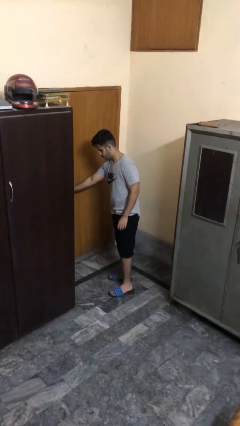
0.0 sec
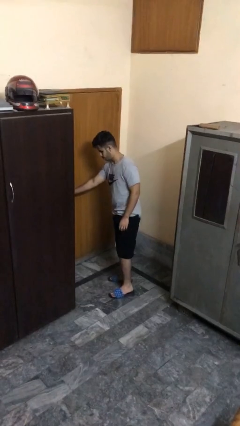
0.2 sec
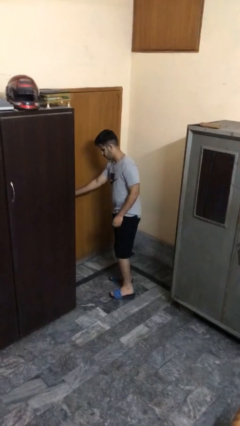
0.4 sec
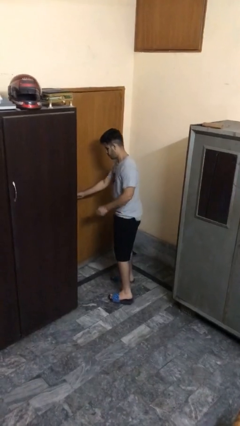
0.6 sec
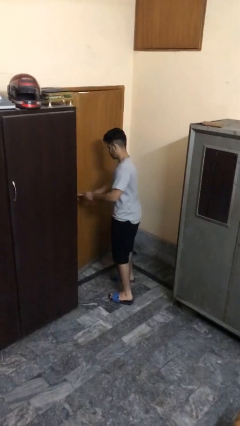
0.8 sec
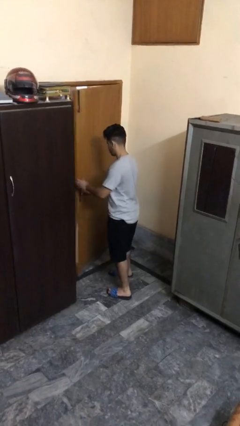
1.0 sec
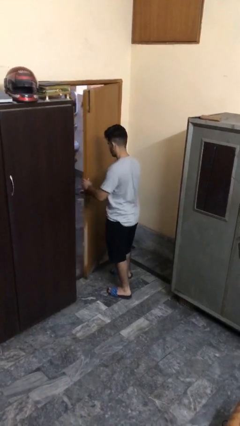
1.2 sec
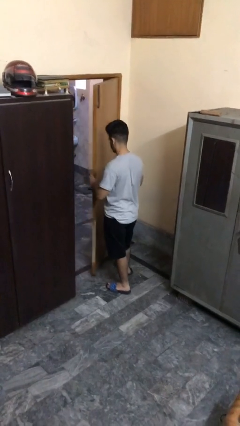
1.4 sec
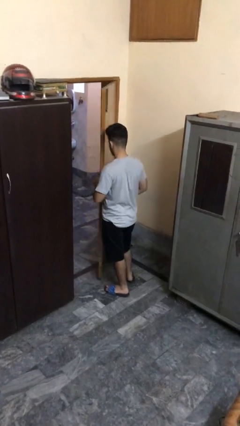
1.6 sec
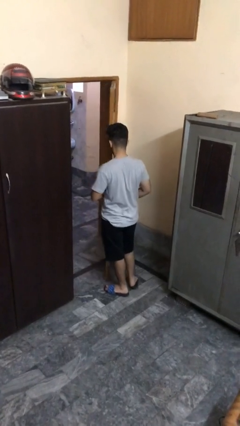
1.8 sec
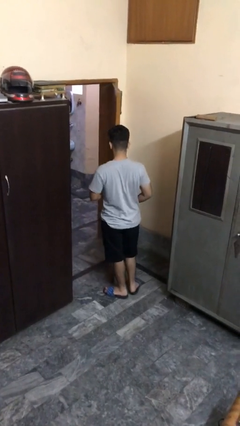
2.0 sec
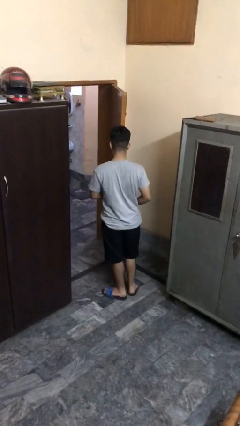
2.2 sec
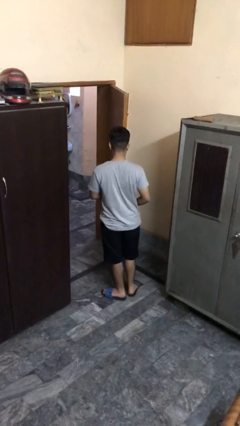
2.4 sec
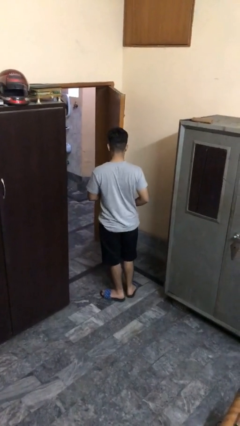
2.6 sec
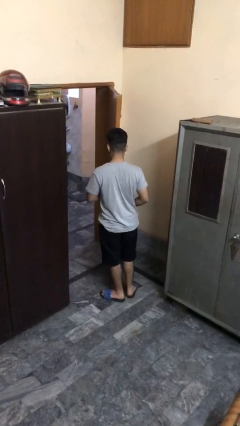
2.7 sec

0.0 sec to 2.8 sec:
person opens facility door

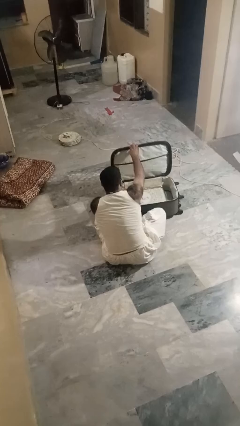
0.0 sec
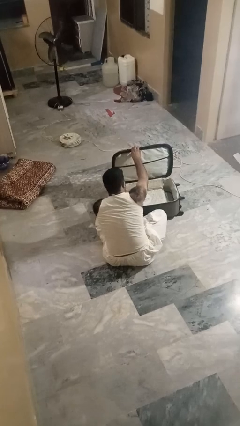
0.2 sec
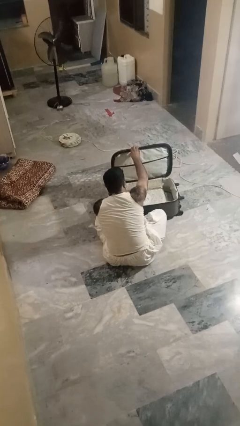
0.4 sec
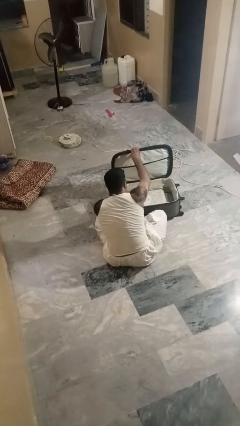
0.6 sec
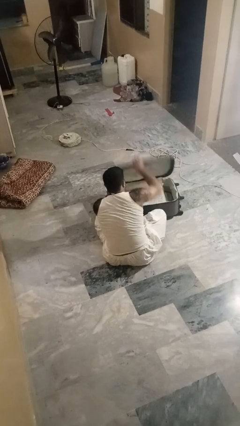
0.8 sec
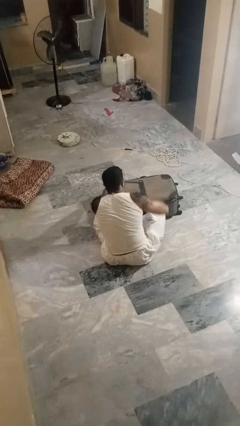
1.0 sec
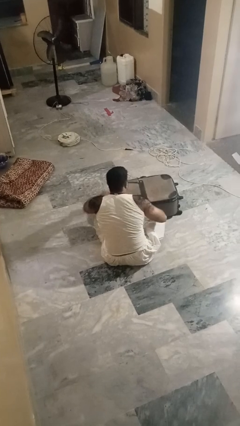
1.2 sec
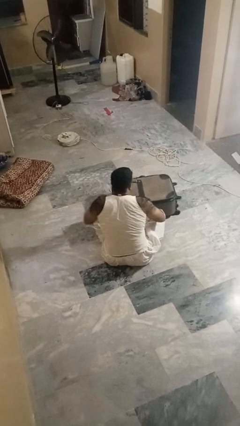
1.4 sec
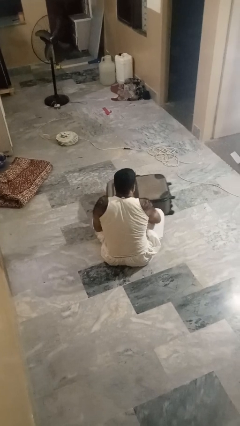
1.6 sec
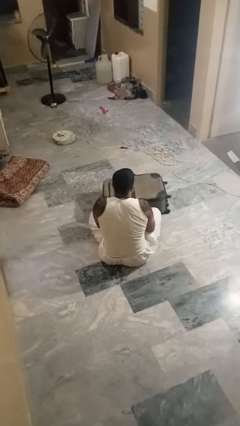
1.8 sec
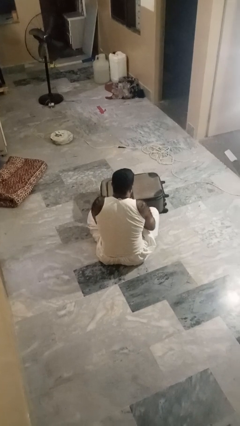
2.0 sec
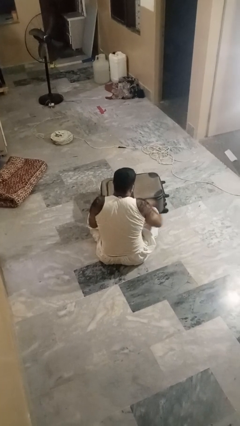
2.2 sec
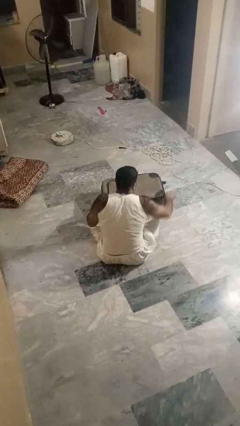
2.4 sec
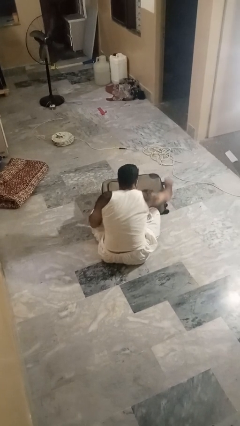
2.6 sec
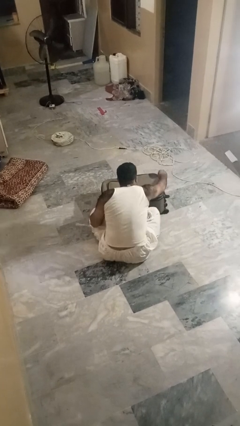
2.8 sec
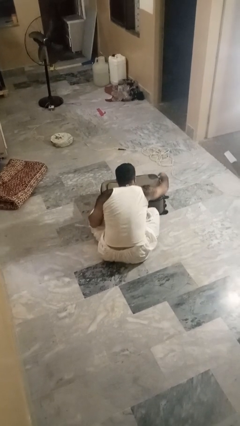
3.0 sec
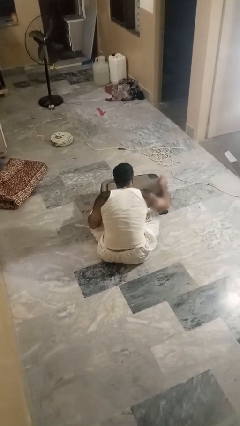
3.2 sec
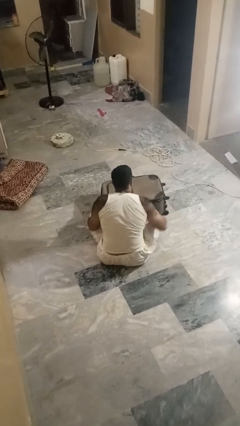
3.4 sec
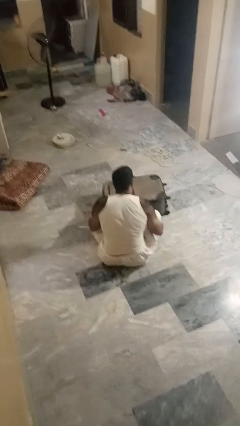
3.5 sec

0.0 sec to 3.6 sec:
person closes suitcase

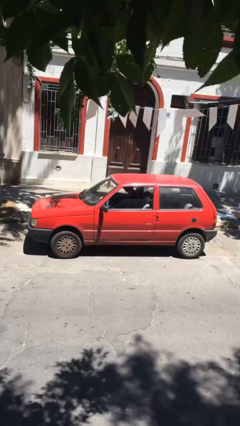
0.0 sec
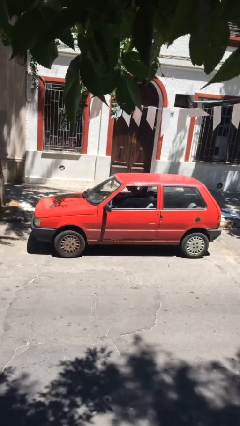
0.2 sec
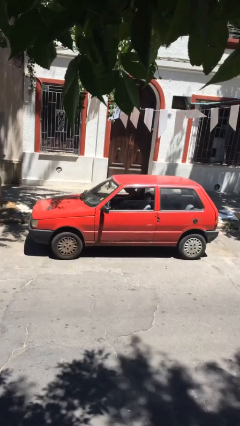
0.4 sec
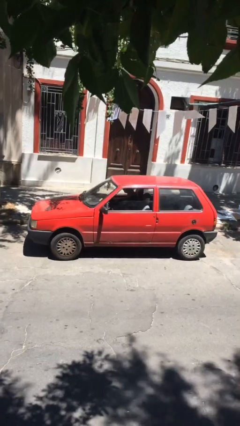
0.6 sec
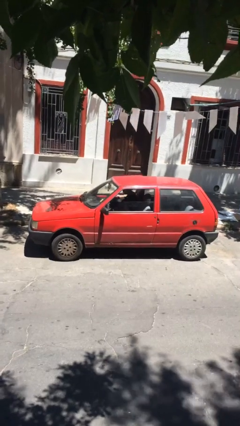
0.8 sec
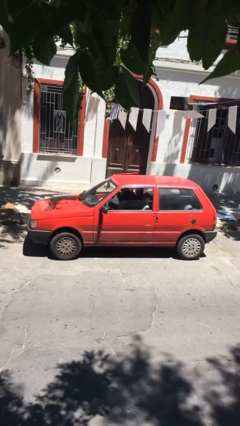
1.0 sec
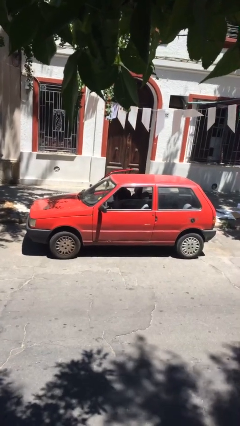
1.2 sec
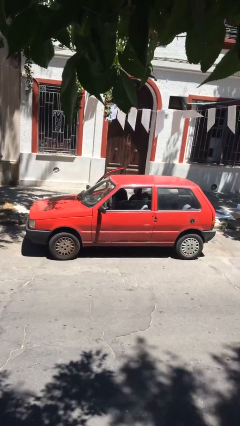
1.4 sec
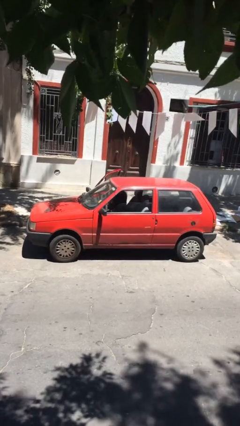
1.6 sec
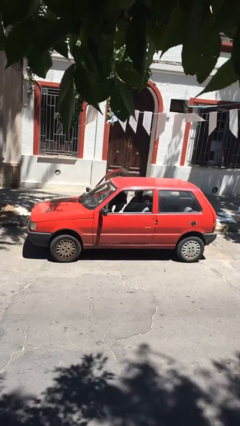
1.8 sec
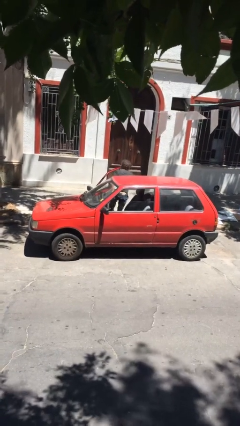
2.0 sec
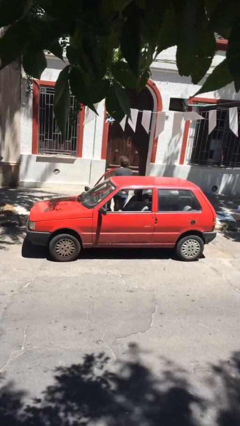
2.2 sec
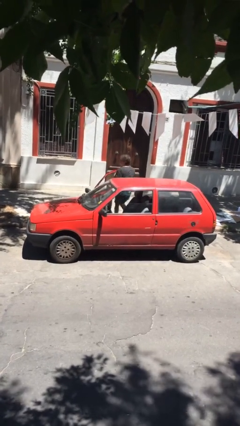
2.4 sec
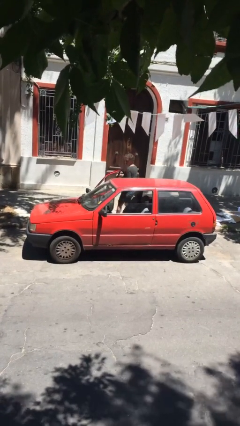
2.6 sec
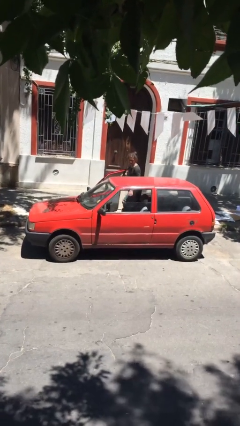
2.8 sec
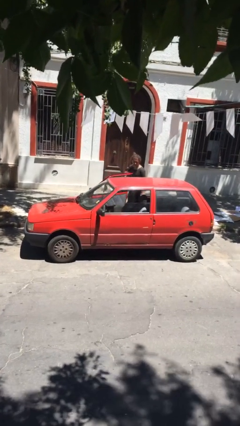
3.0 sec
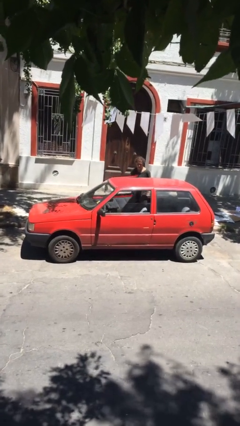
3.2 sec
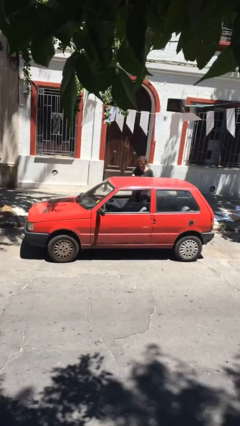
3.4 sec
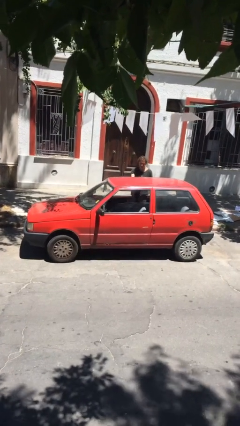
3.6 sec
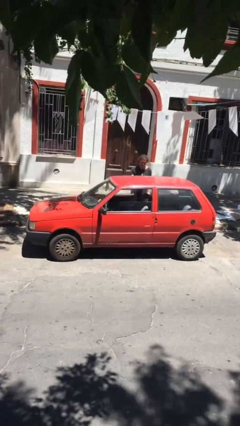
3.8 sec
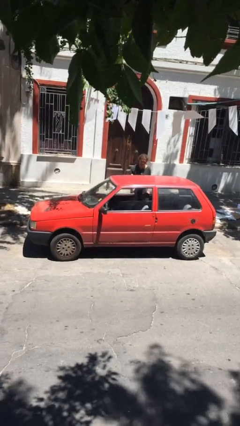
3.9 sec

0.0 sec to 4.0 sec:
car drops off person

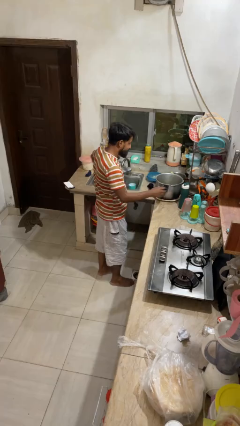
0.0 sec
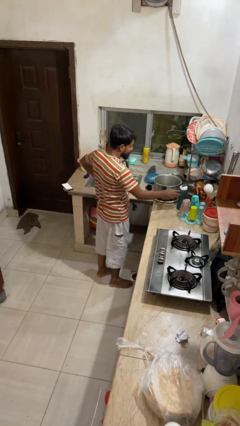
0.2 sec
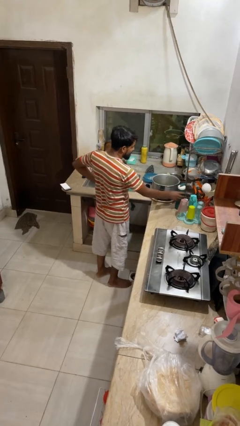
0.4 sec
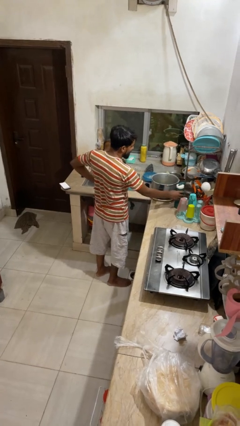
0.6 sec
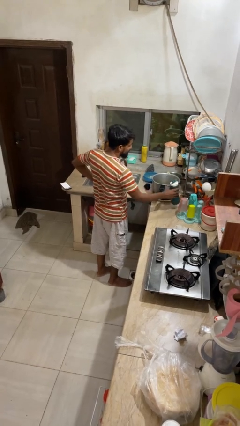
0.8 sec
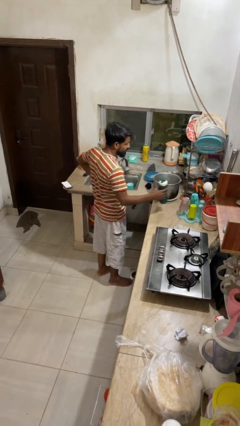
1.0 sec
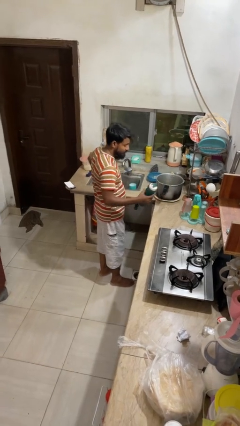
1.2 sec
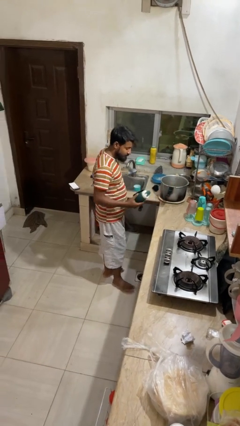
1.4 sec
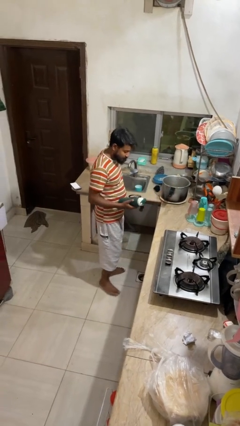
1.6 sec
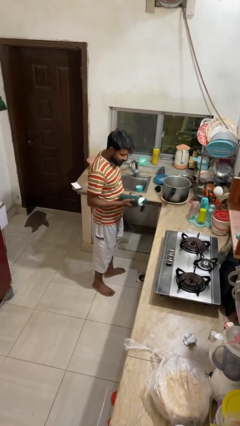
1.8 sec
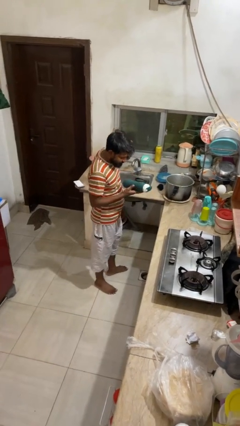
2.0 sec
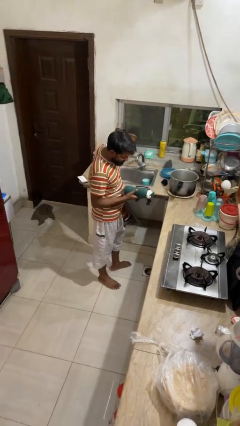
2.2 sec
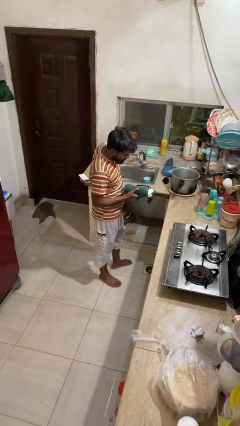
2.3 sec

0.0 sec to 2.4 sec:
person picks up object from countertop

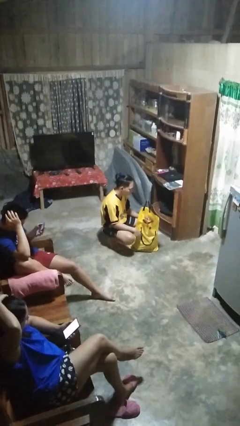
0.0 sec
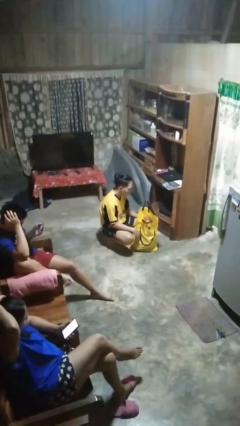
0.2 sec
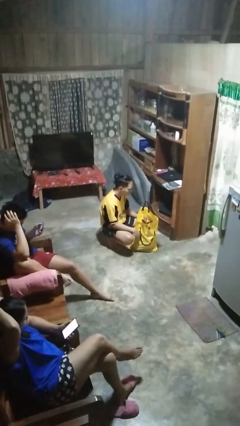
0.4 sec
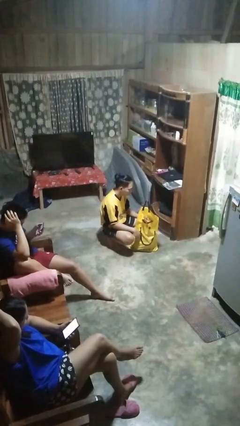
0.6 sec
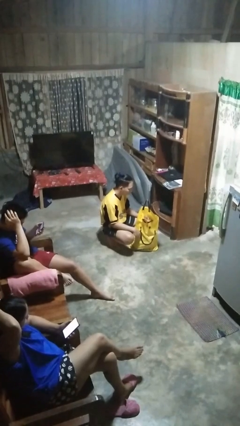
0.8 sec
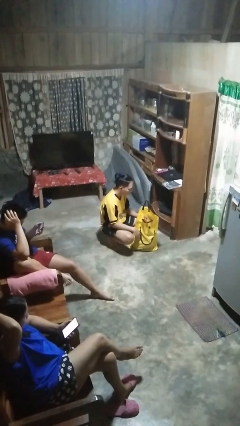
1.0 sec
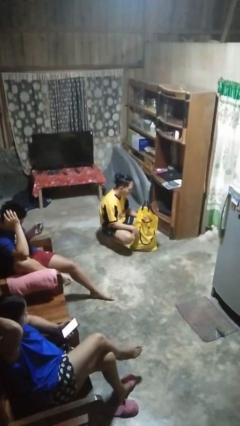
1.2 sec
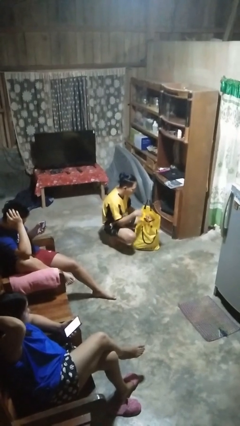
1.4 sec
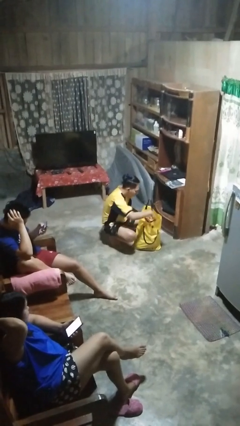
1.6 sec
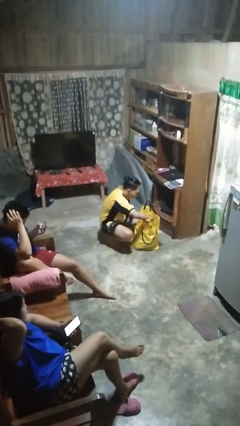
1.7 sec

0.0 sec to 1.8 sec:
person searches in bag

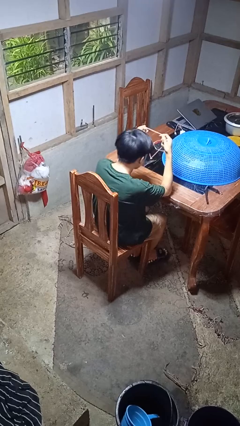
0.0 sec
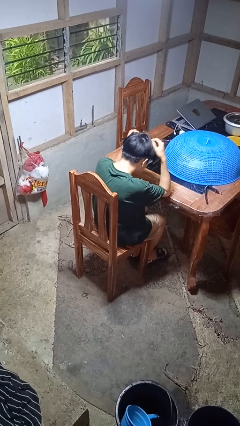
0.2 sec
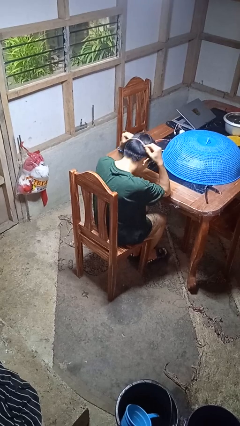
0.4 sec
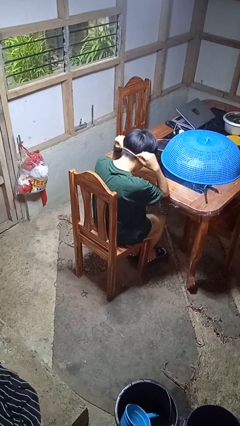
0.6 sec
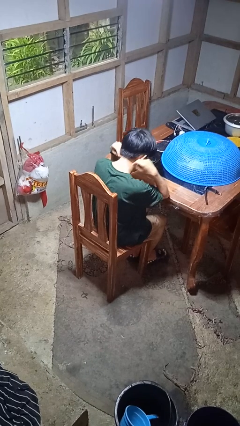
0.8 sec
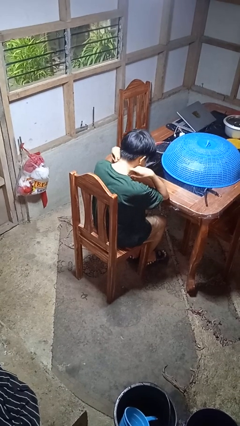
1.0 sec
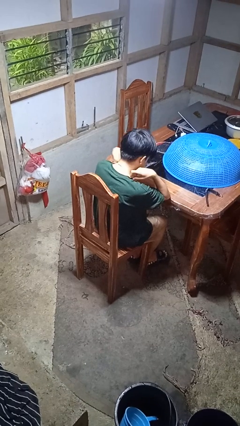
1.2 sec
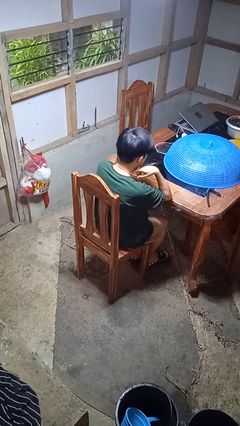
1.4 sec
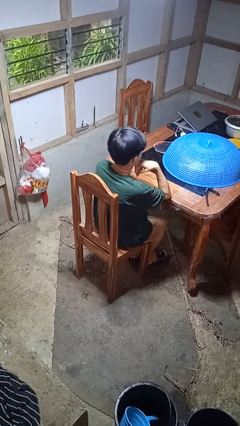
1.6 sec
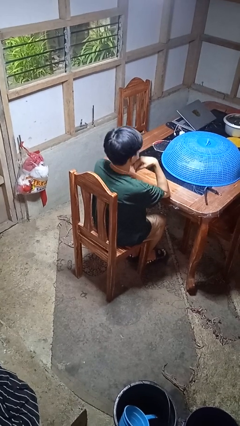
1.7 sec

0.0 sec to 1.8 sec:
person puts on necklace

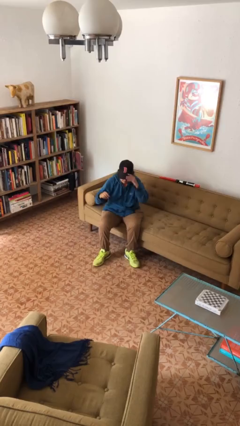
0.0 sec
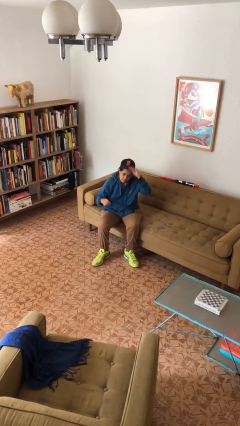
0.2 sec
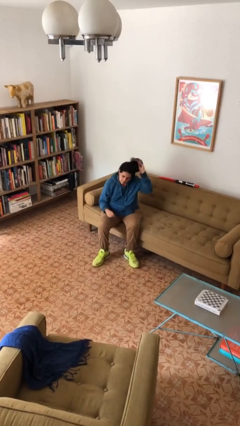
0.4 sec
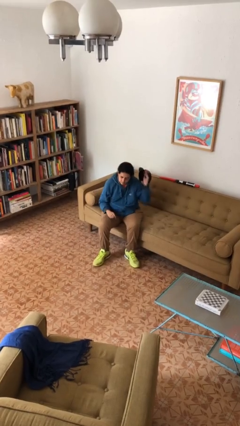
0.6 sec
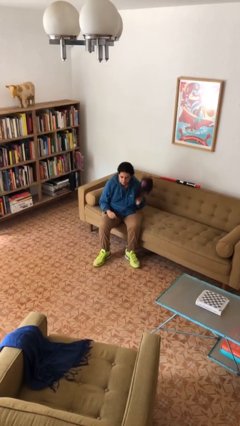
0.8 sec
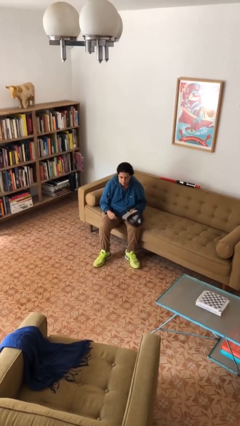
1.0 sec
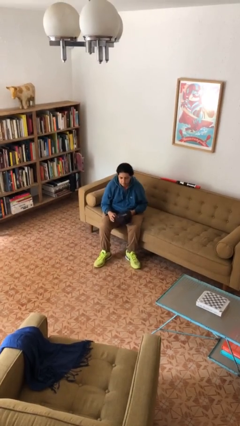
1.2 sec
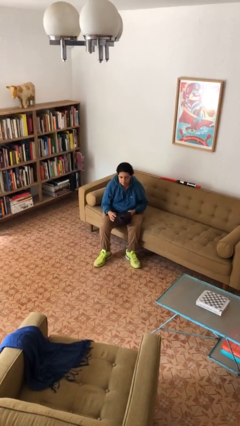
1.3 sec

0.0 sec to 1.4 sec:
person takes off hat
